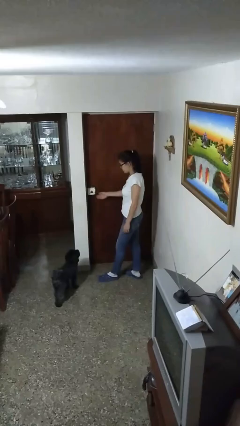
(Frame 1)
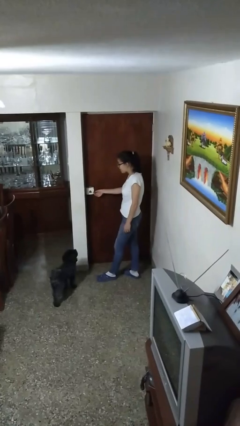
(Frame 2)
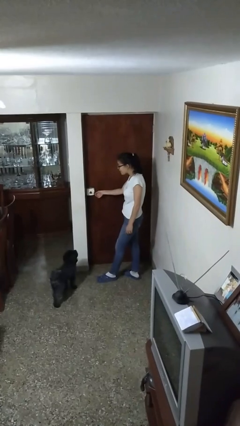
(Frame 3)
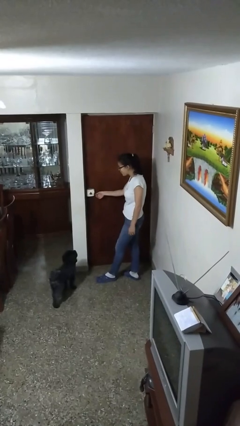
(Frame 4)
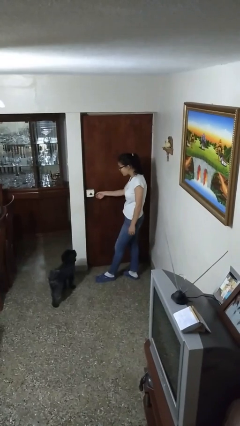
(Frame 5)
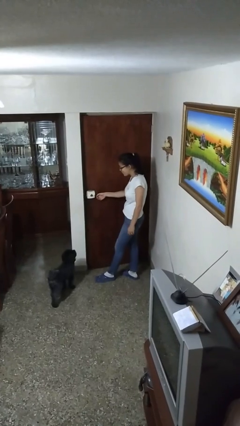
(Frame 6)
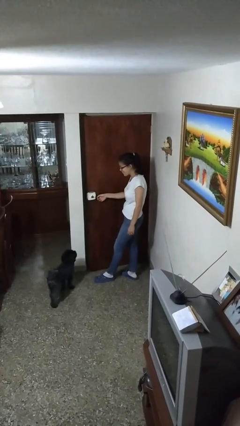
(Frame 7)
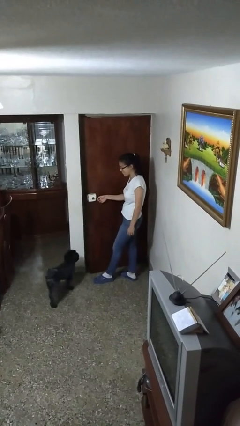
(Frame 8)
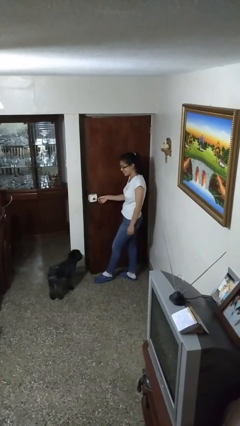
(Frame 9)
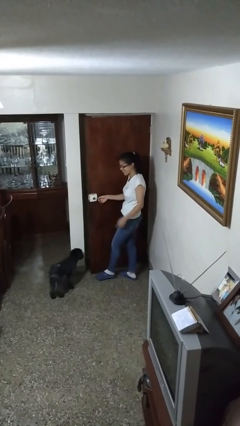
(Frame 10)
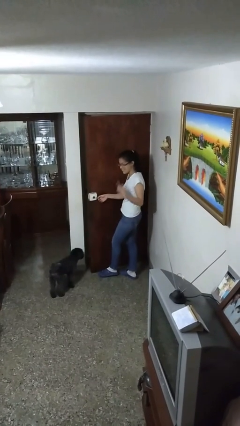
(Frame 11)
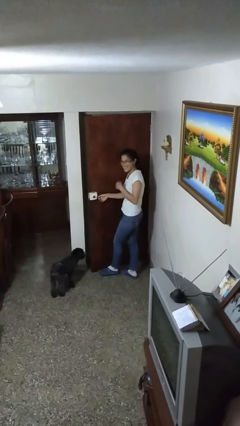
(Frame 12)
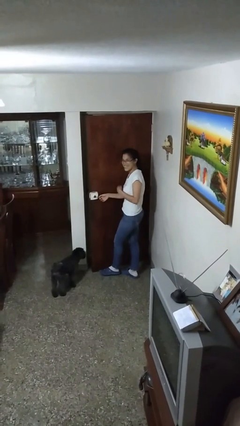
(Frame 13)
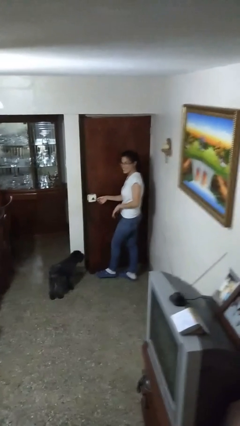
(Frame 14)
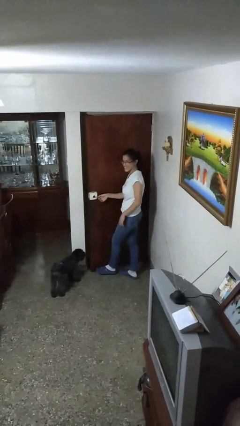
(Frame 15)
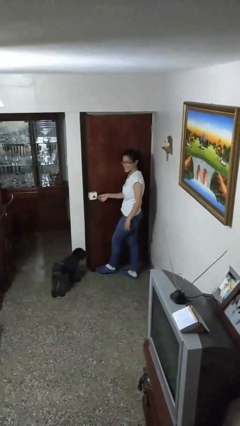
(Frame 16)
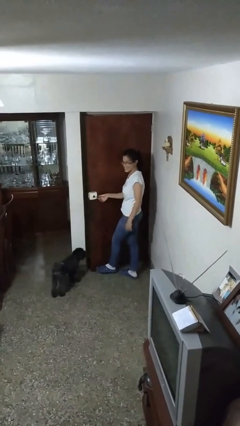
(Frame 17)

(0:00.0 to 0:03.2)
person opens facility door

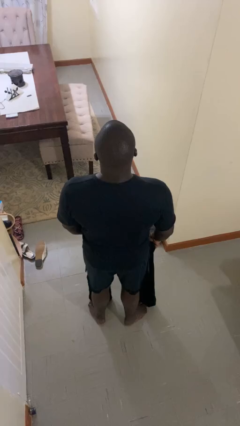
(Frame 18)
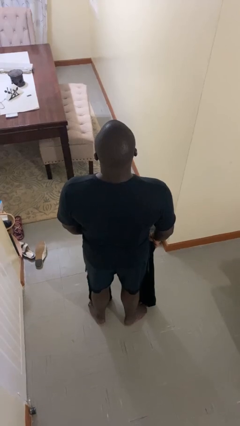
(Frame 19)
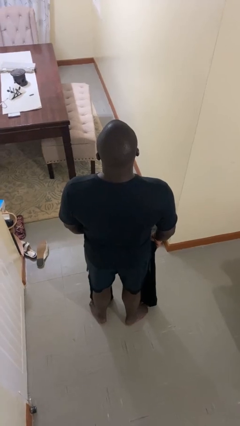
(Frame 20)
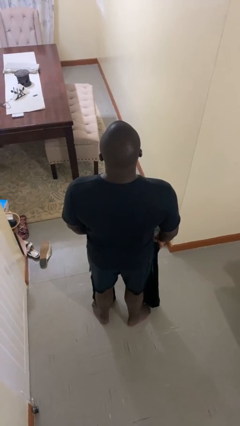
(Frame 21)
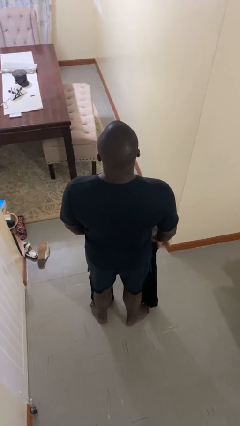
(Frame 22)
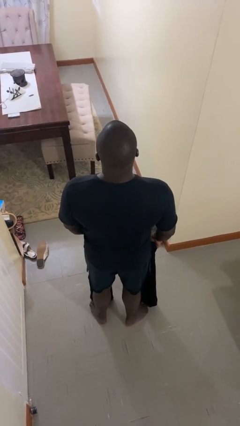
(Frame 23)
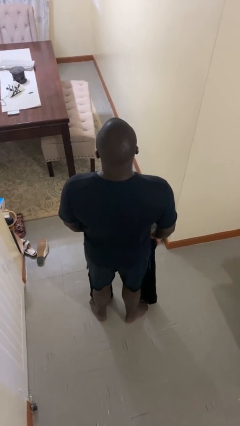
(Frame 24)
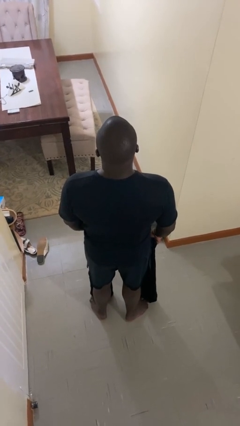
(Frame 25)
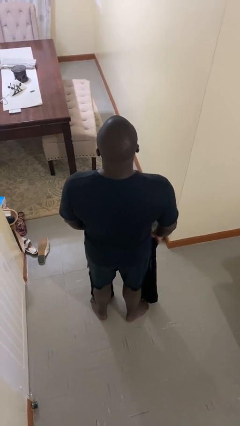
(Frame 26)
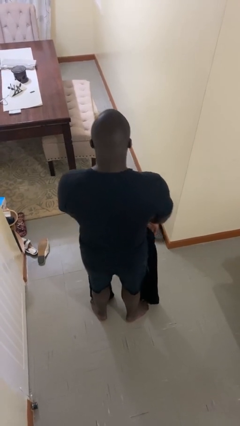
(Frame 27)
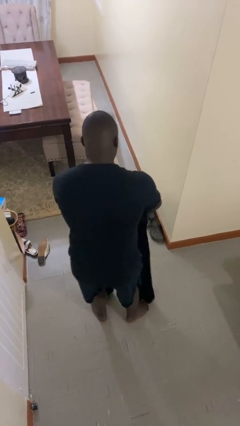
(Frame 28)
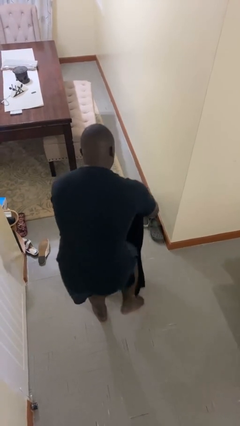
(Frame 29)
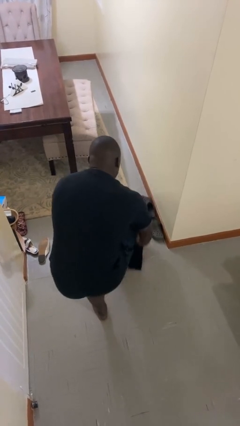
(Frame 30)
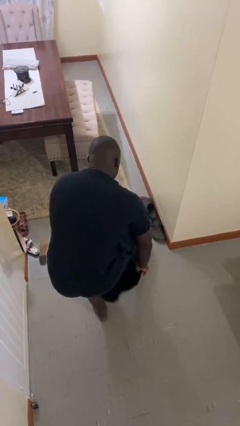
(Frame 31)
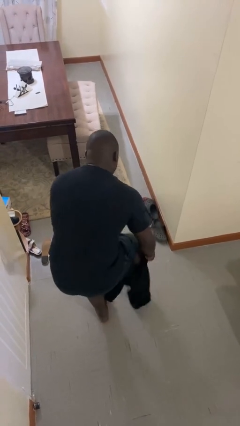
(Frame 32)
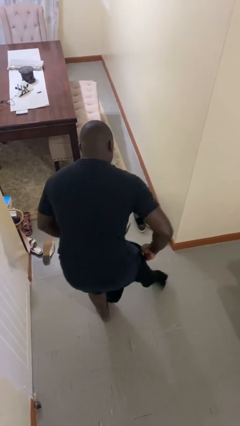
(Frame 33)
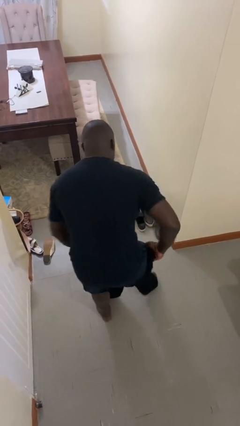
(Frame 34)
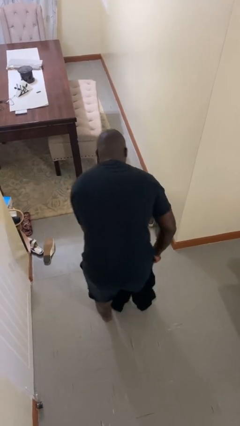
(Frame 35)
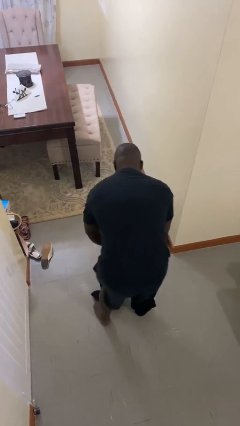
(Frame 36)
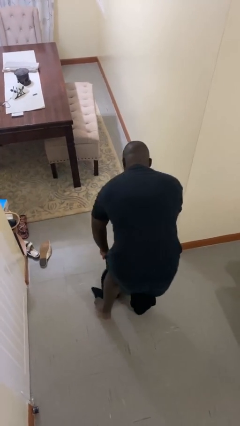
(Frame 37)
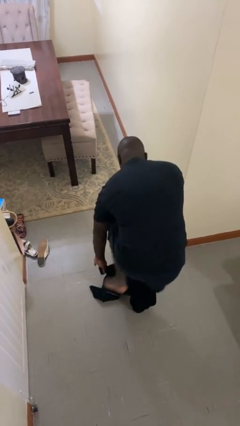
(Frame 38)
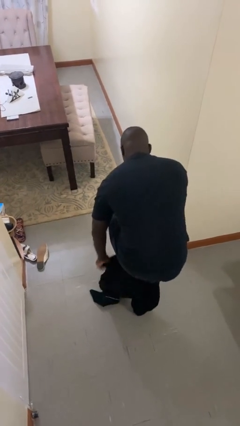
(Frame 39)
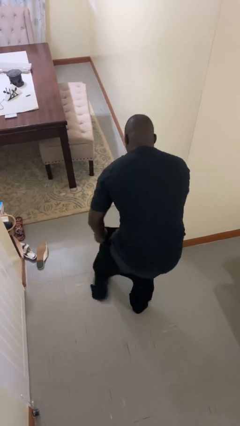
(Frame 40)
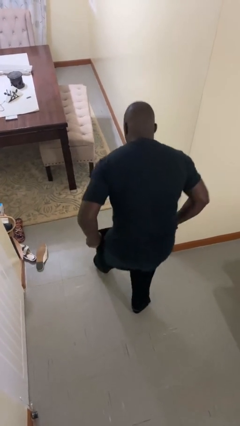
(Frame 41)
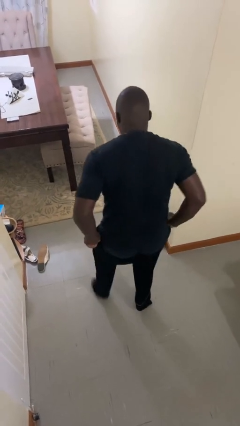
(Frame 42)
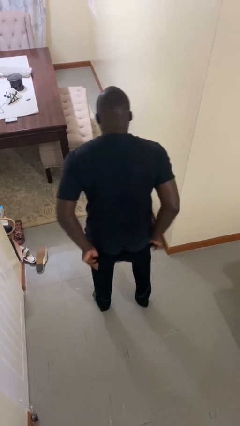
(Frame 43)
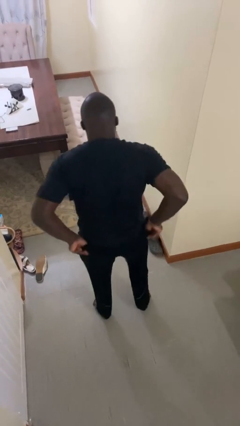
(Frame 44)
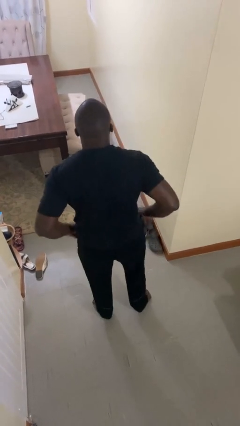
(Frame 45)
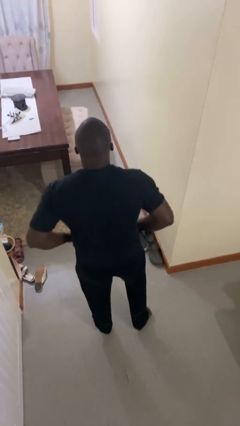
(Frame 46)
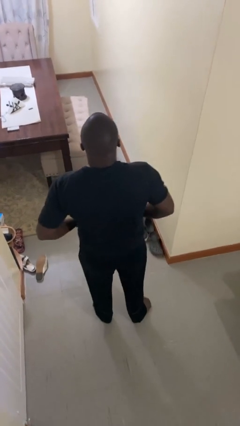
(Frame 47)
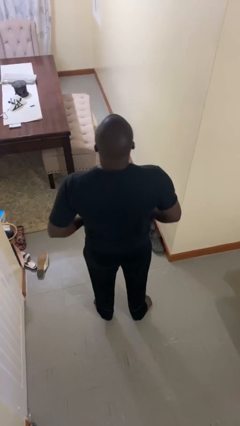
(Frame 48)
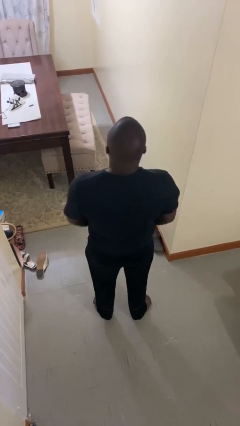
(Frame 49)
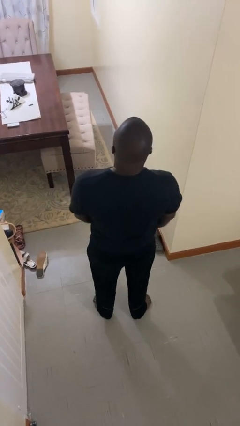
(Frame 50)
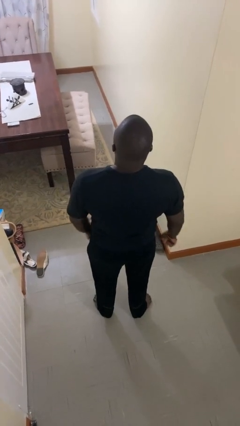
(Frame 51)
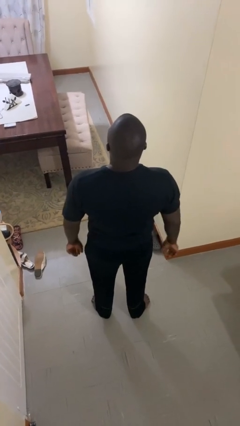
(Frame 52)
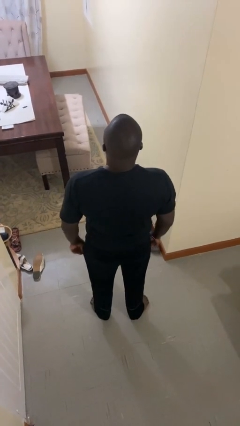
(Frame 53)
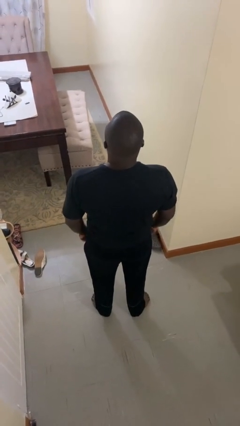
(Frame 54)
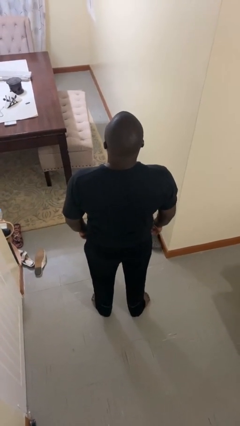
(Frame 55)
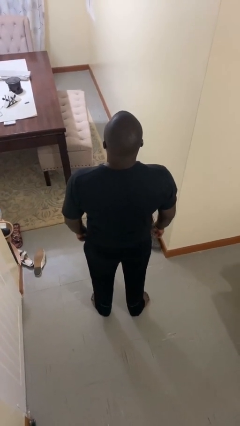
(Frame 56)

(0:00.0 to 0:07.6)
person takes off pants

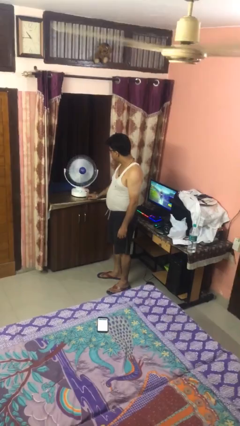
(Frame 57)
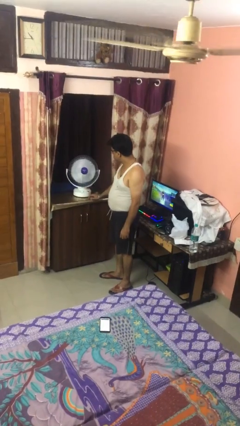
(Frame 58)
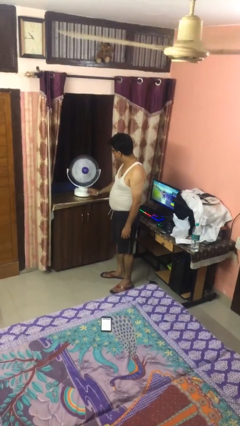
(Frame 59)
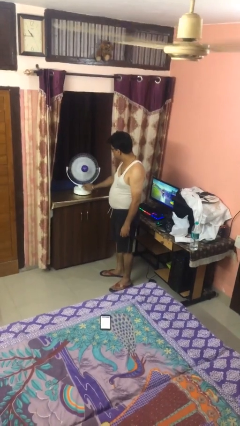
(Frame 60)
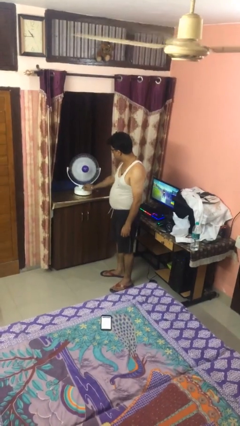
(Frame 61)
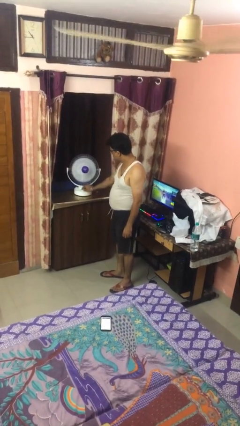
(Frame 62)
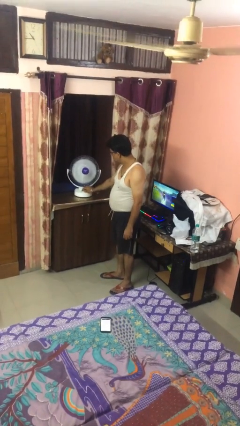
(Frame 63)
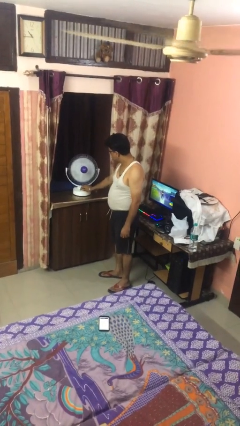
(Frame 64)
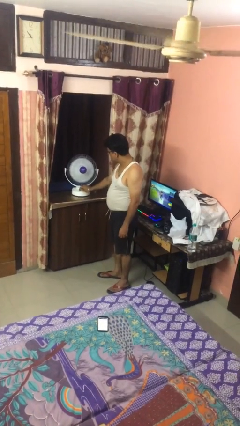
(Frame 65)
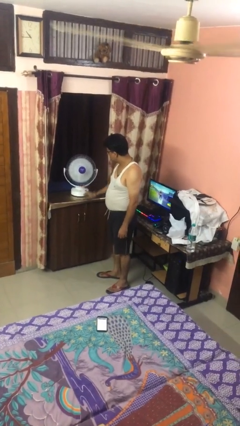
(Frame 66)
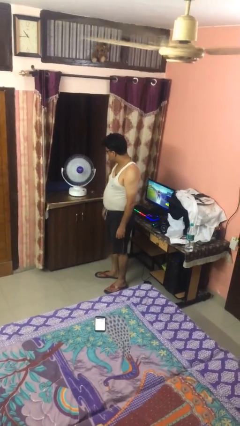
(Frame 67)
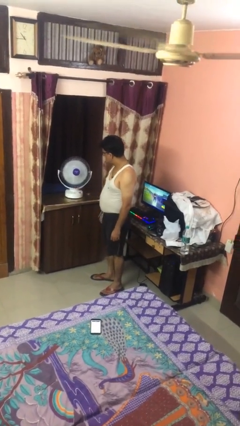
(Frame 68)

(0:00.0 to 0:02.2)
person turns off fan

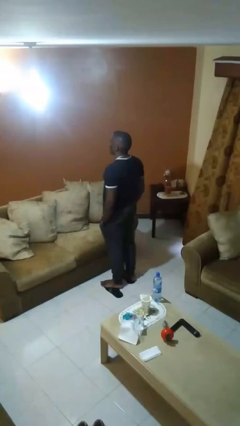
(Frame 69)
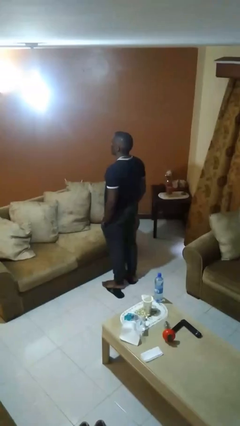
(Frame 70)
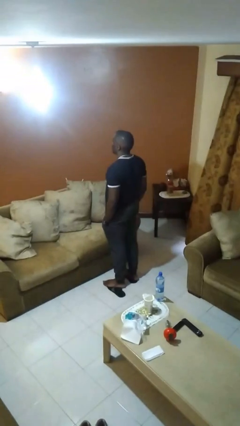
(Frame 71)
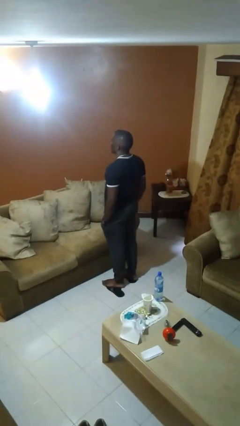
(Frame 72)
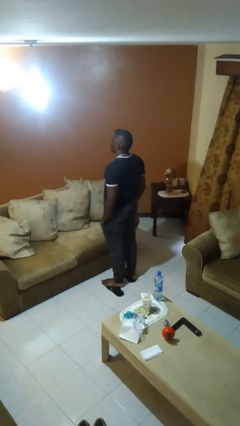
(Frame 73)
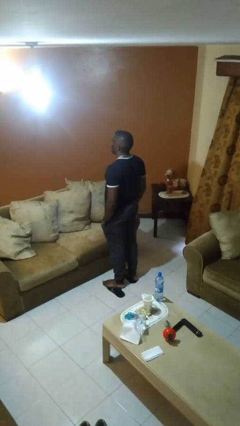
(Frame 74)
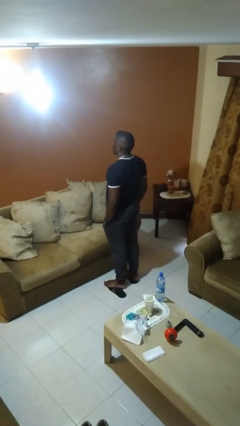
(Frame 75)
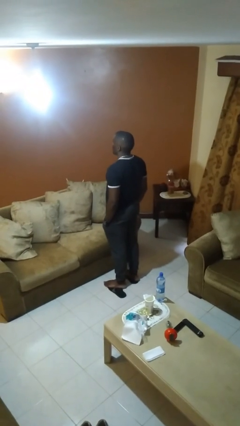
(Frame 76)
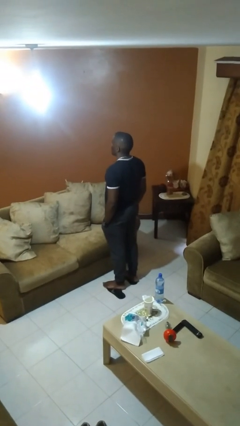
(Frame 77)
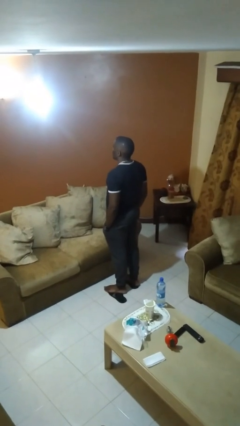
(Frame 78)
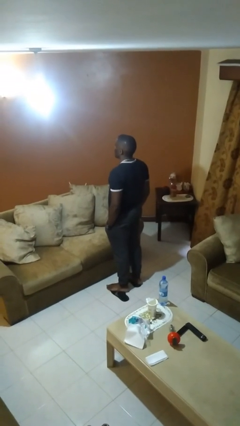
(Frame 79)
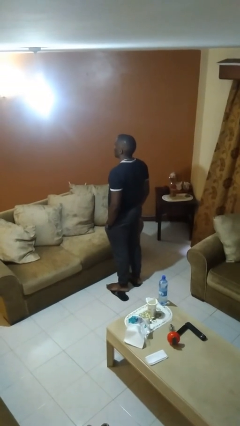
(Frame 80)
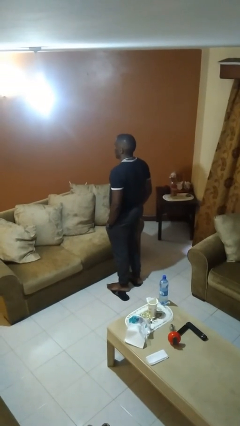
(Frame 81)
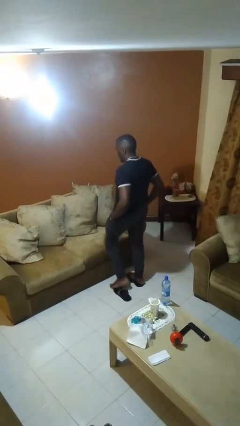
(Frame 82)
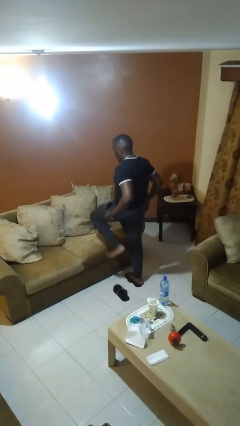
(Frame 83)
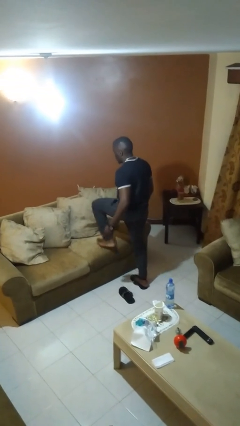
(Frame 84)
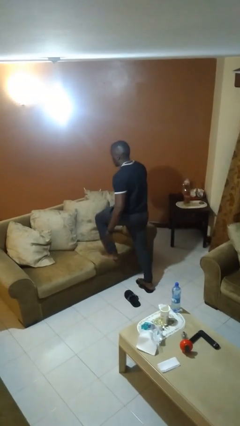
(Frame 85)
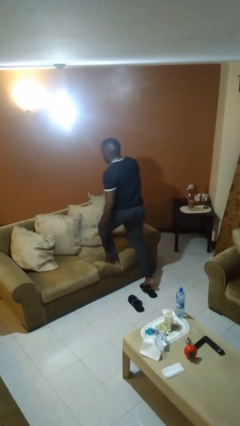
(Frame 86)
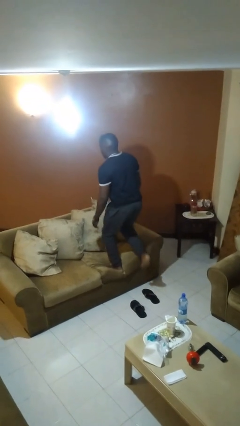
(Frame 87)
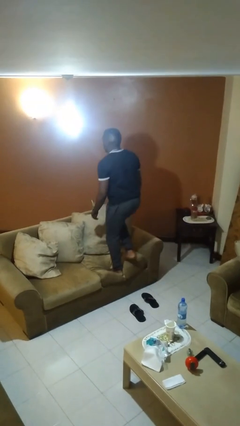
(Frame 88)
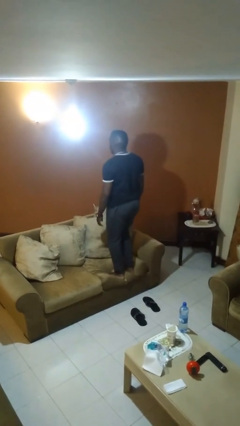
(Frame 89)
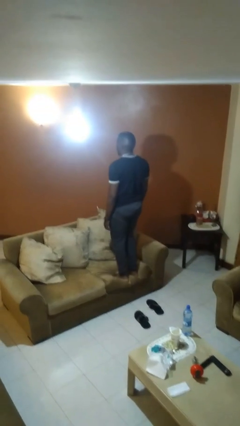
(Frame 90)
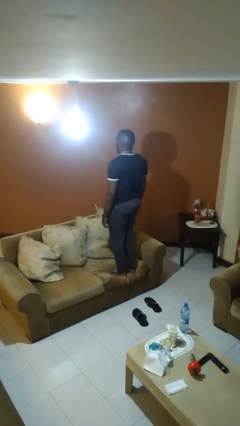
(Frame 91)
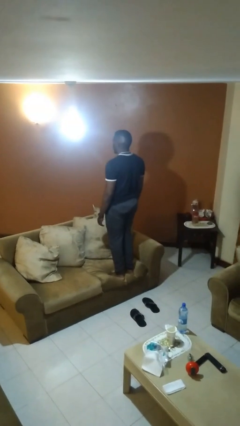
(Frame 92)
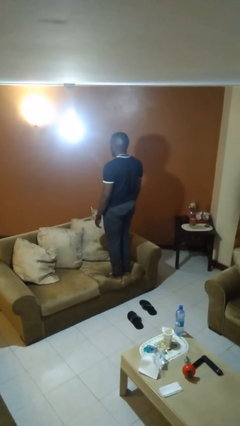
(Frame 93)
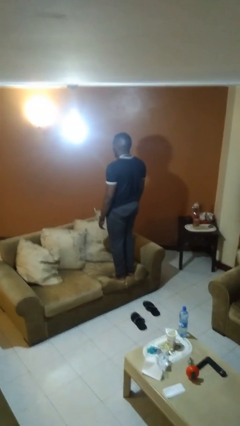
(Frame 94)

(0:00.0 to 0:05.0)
person climbs on chair
